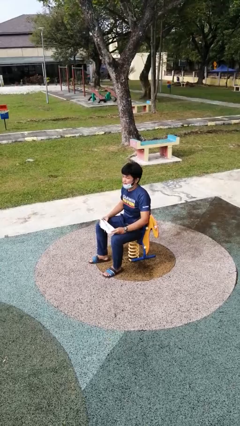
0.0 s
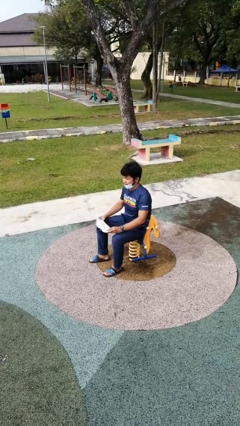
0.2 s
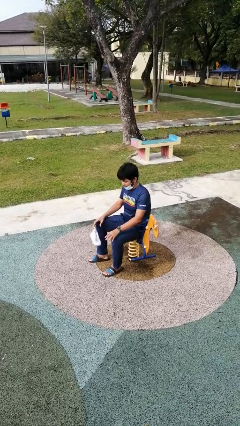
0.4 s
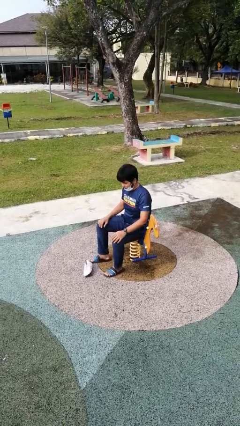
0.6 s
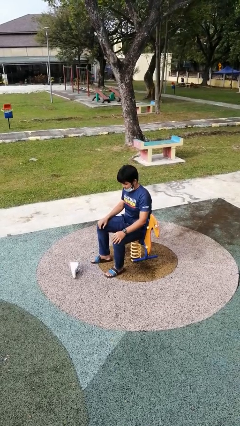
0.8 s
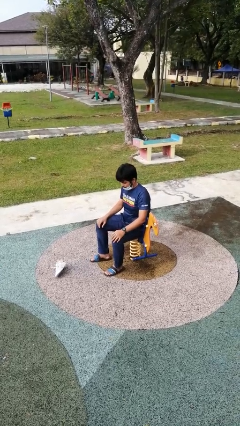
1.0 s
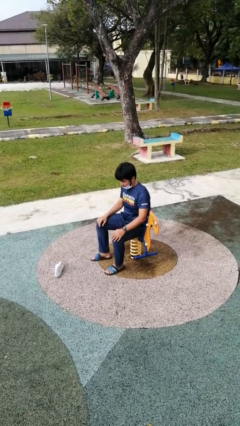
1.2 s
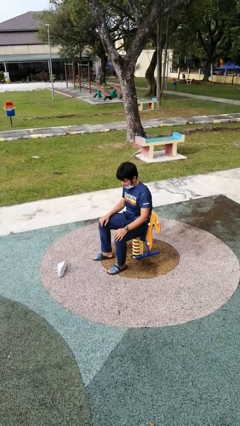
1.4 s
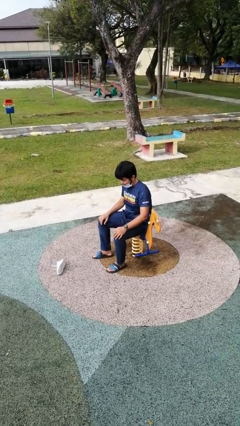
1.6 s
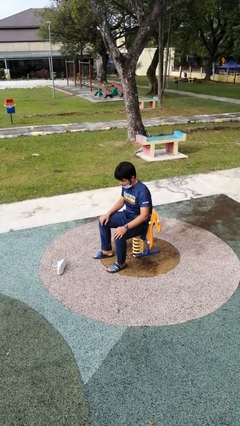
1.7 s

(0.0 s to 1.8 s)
person drops object

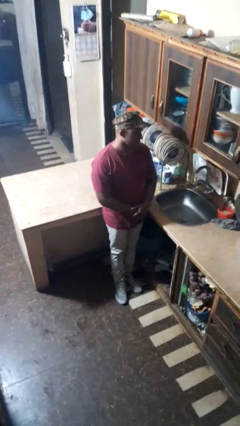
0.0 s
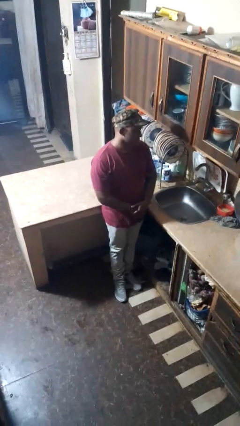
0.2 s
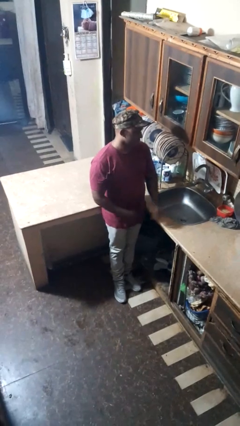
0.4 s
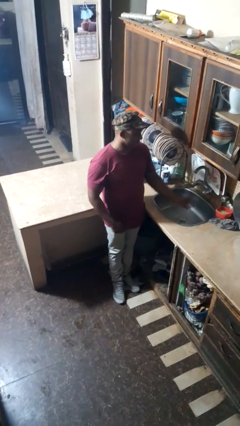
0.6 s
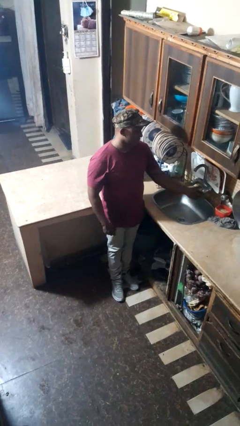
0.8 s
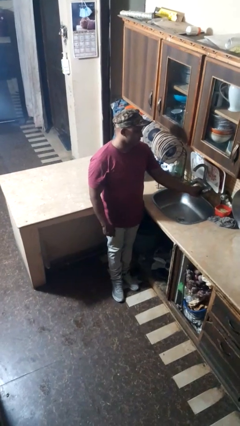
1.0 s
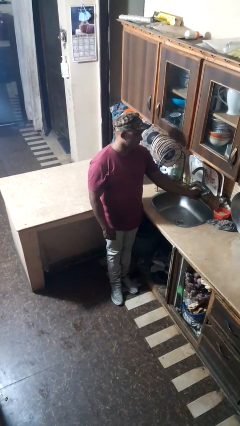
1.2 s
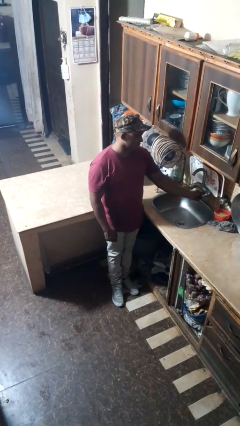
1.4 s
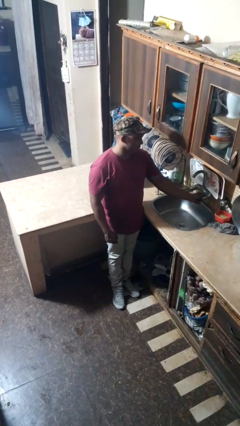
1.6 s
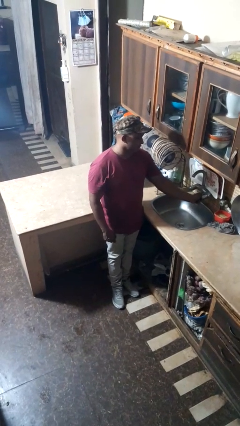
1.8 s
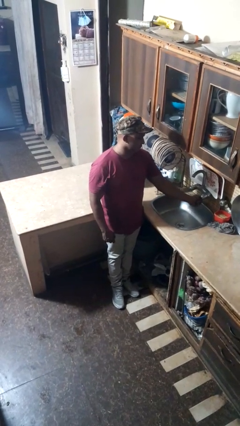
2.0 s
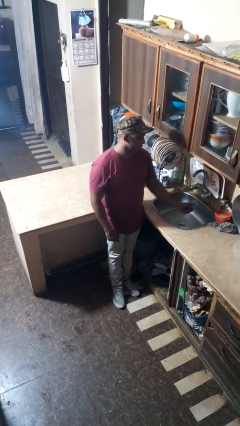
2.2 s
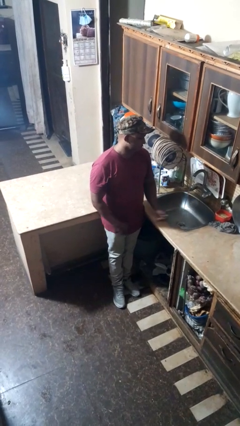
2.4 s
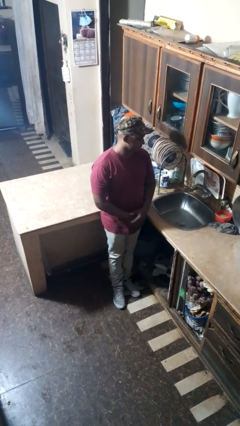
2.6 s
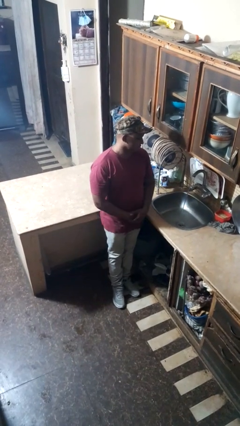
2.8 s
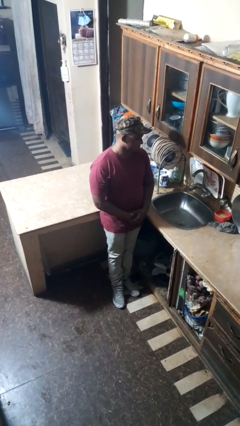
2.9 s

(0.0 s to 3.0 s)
person turns on faucet

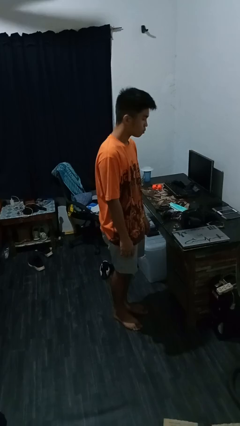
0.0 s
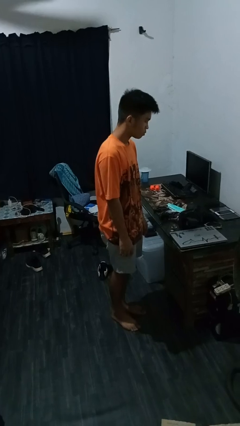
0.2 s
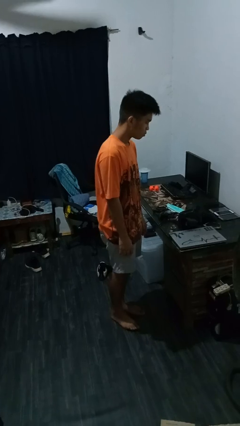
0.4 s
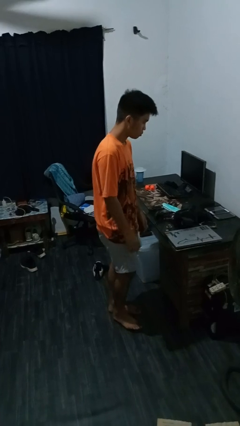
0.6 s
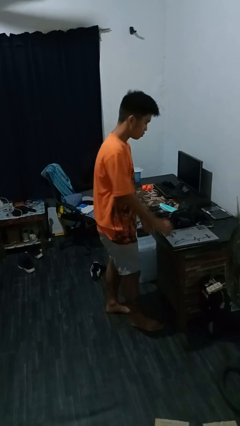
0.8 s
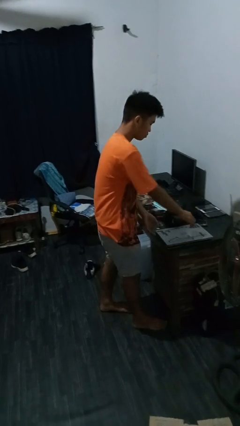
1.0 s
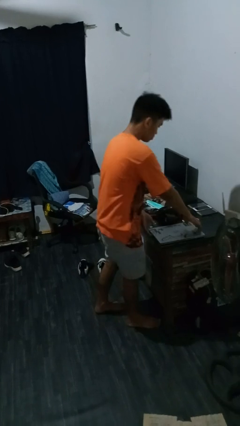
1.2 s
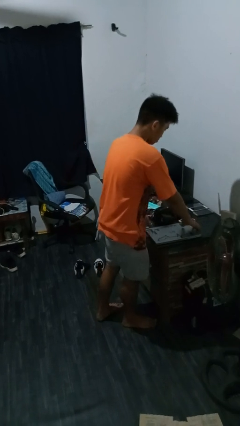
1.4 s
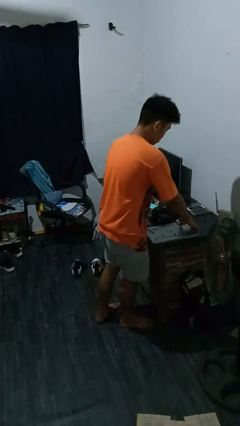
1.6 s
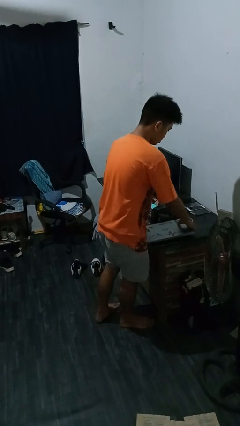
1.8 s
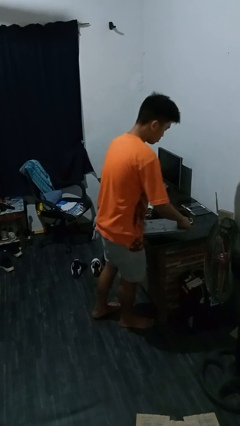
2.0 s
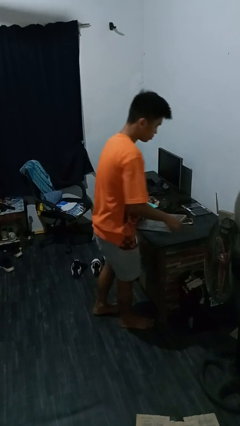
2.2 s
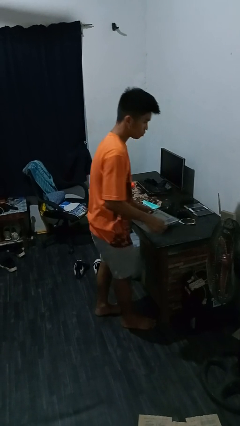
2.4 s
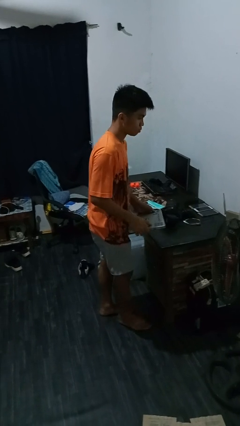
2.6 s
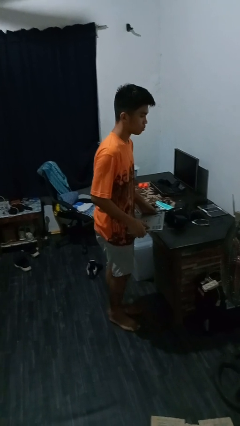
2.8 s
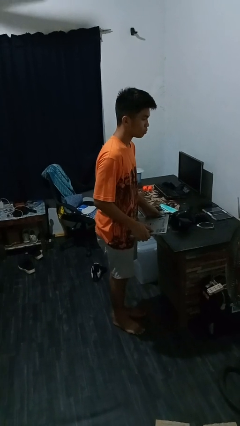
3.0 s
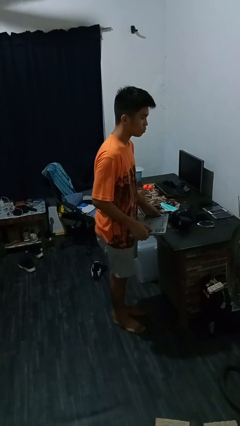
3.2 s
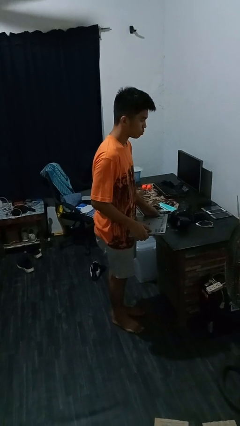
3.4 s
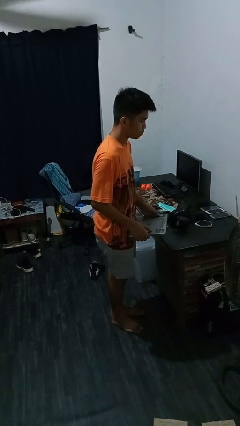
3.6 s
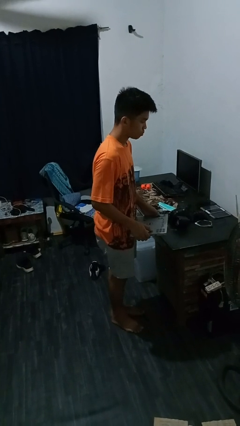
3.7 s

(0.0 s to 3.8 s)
person picks up object from countertop

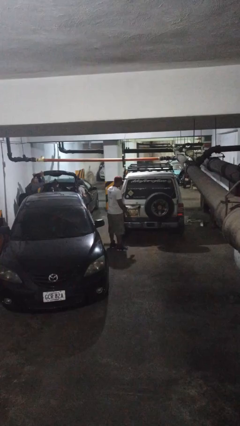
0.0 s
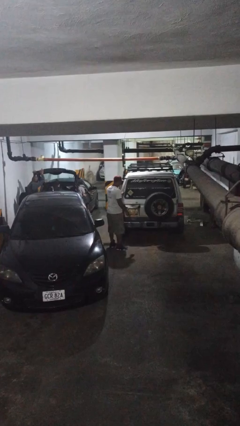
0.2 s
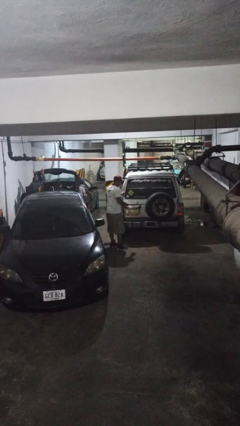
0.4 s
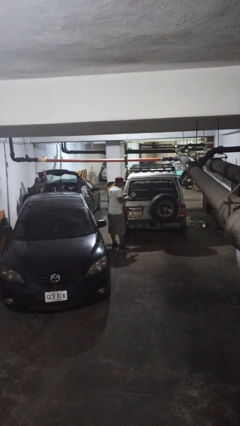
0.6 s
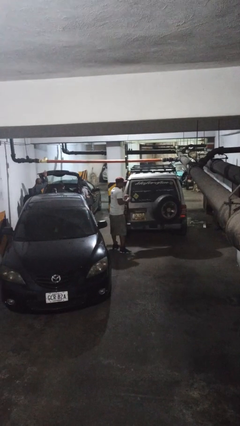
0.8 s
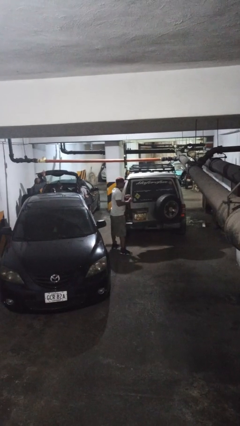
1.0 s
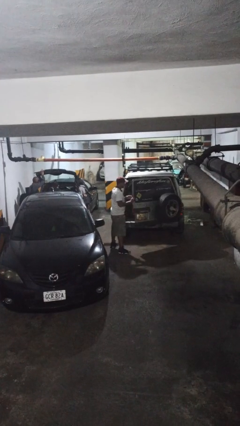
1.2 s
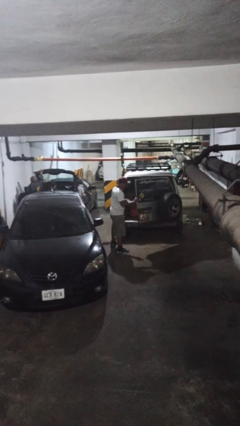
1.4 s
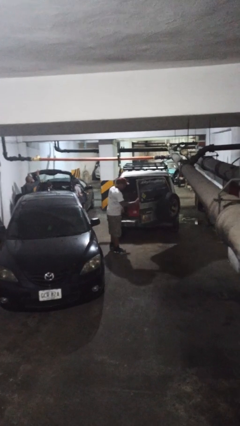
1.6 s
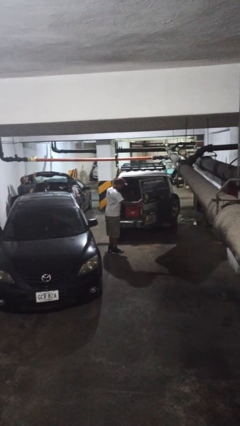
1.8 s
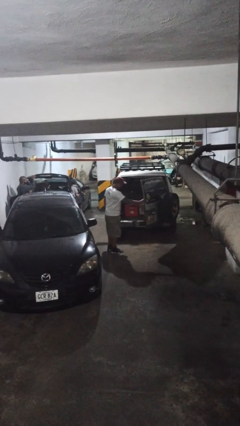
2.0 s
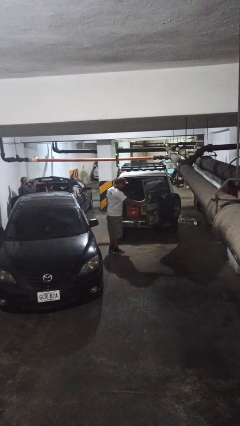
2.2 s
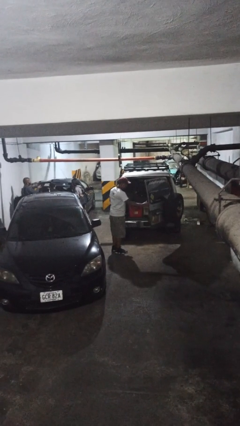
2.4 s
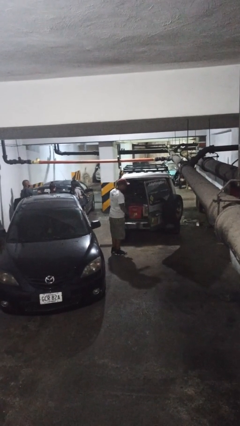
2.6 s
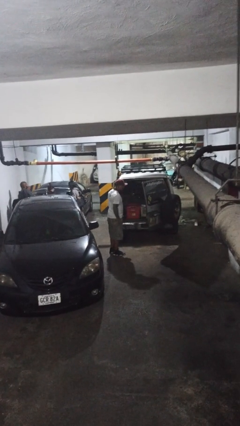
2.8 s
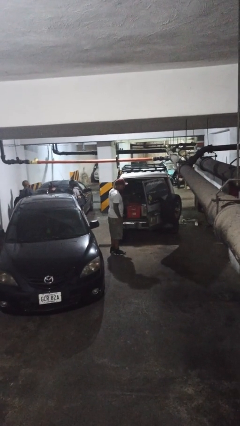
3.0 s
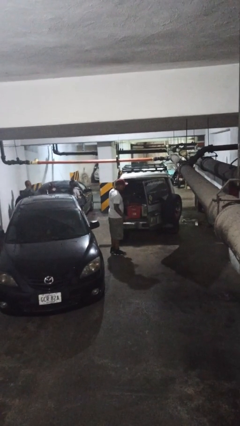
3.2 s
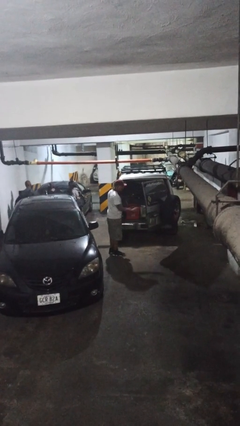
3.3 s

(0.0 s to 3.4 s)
person opens car trunk

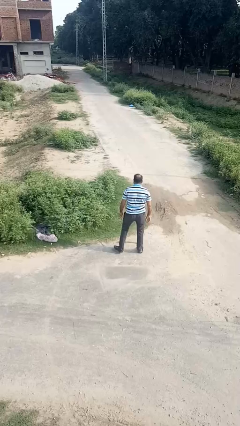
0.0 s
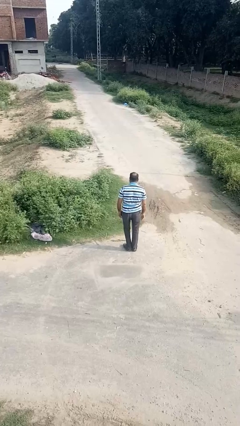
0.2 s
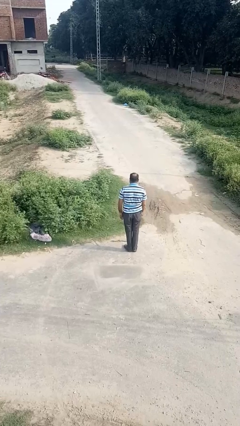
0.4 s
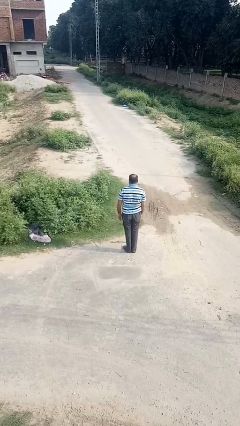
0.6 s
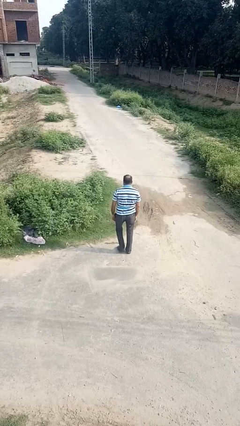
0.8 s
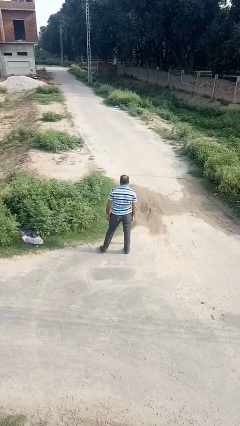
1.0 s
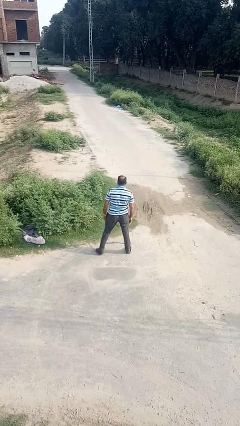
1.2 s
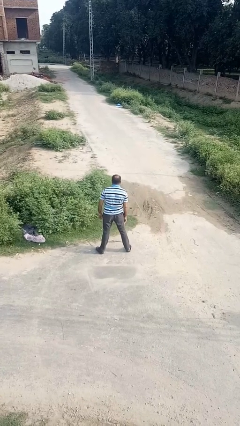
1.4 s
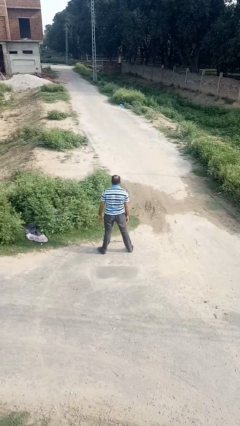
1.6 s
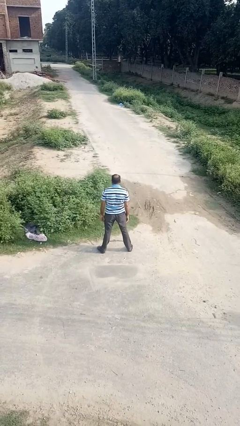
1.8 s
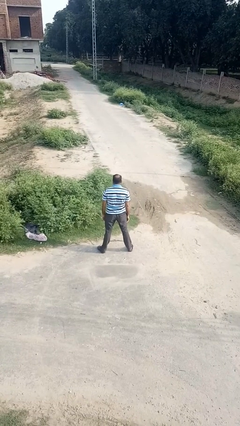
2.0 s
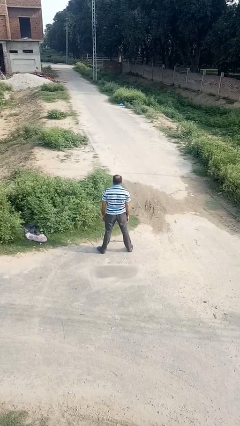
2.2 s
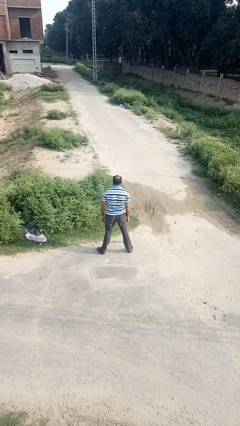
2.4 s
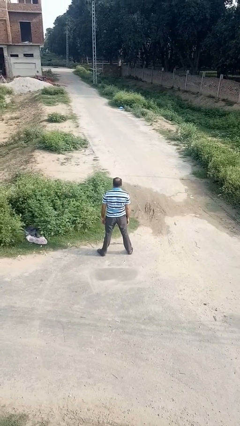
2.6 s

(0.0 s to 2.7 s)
person stretches back

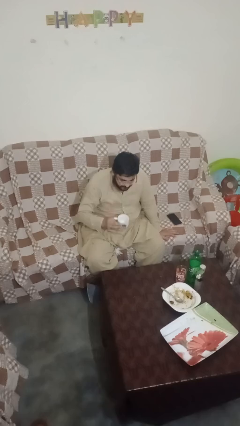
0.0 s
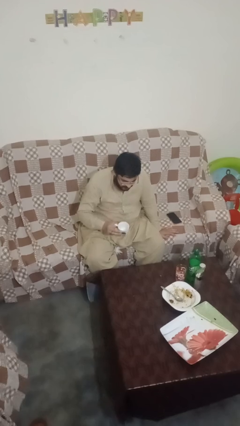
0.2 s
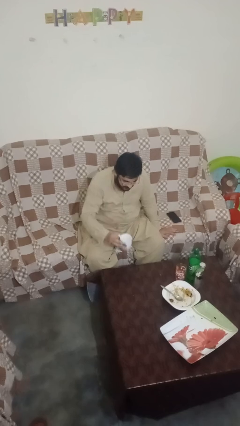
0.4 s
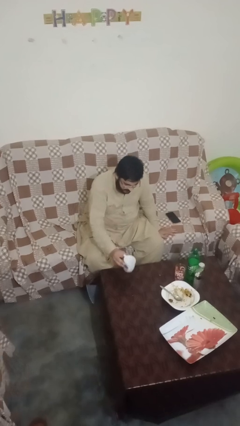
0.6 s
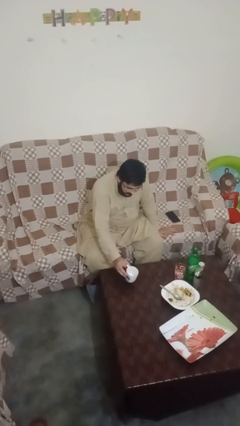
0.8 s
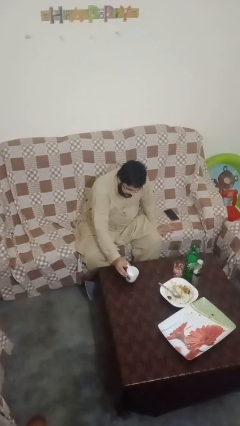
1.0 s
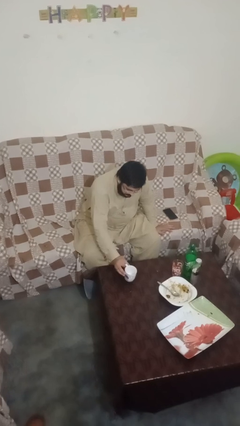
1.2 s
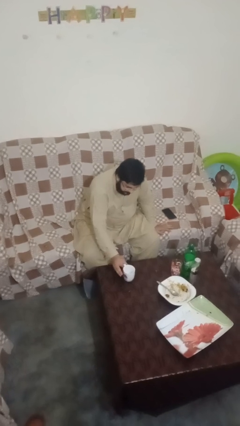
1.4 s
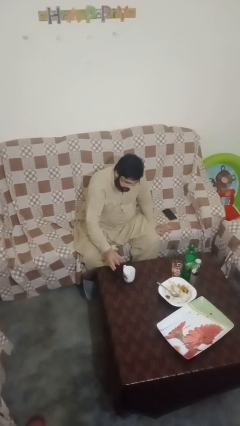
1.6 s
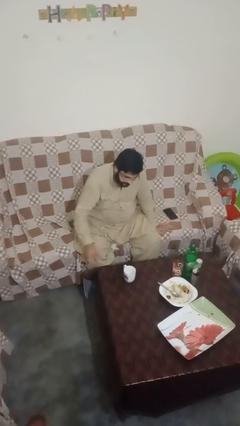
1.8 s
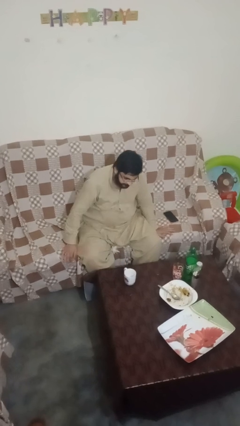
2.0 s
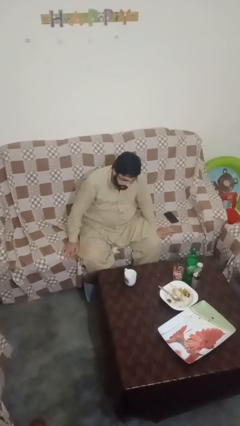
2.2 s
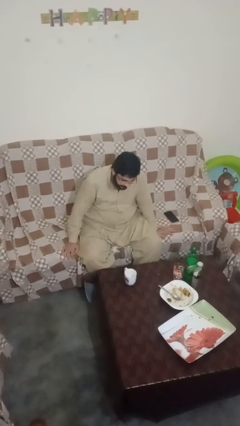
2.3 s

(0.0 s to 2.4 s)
person puts down object on table

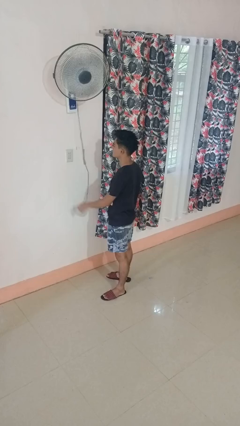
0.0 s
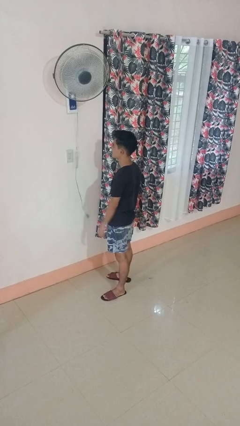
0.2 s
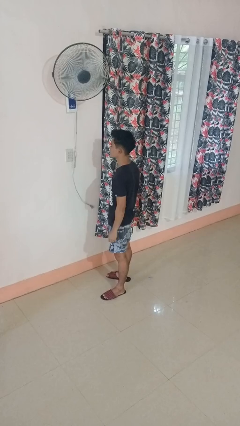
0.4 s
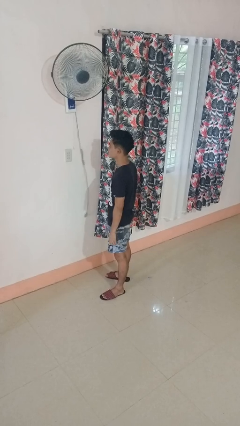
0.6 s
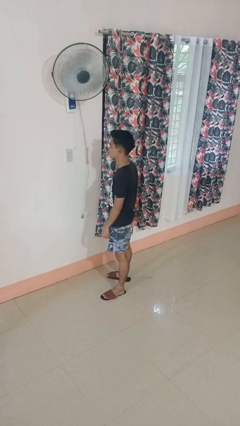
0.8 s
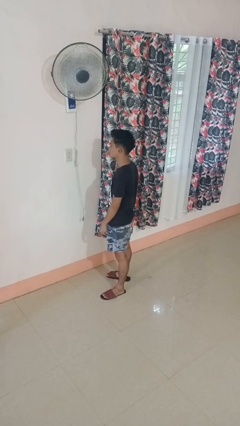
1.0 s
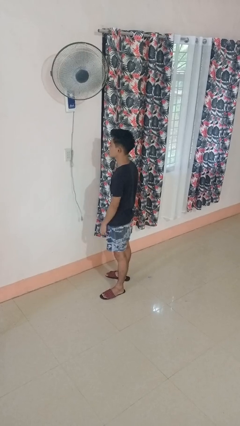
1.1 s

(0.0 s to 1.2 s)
person unplugs from electrical socket
